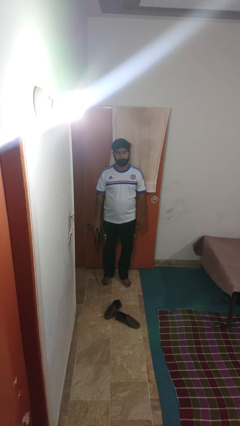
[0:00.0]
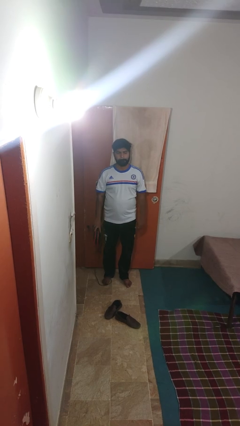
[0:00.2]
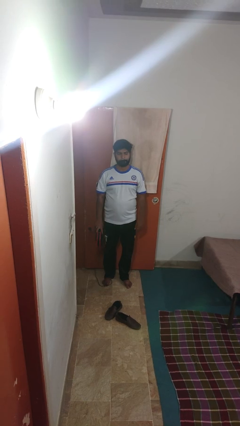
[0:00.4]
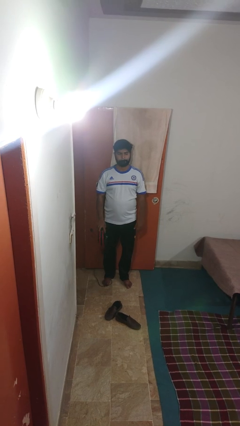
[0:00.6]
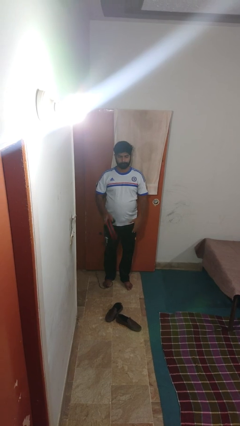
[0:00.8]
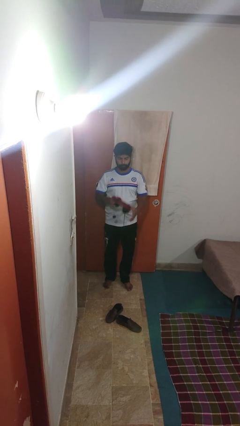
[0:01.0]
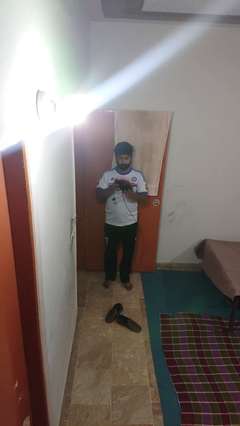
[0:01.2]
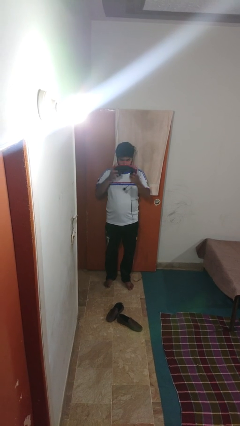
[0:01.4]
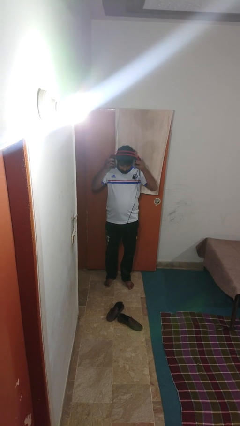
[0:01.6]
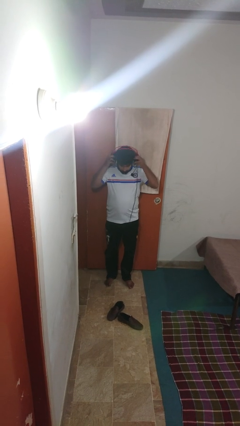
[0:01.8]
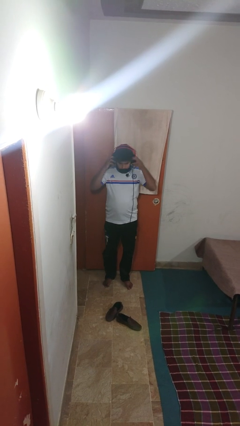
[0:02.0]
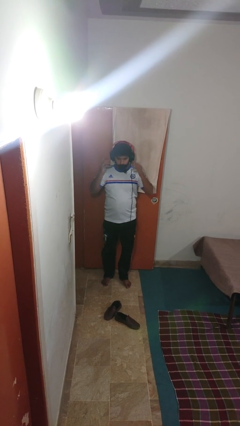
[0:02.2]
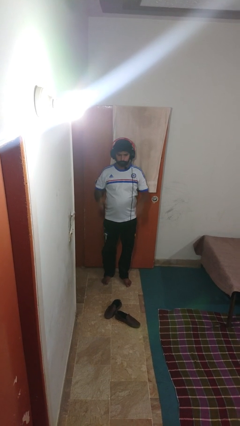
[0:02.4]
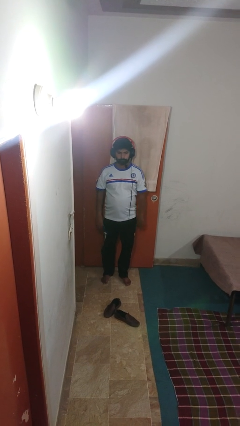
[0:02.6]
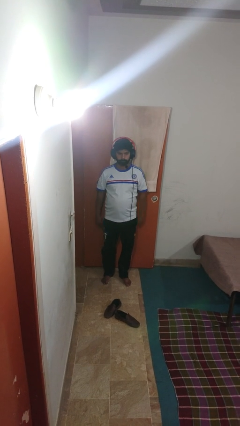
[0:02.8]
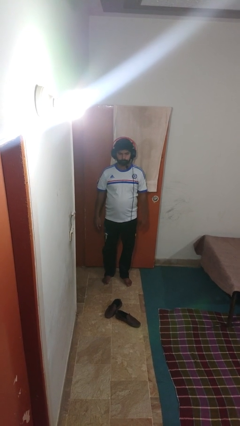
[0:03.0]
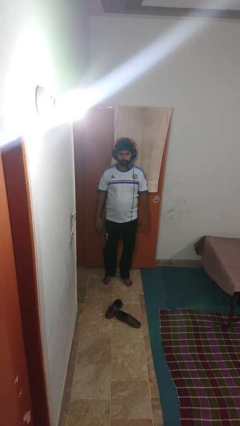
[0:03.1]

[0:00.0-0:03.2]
person puts on headphones

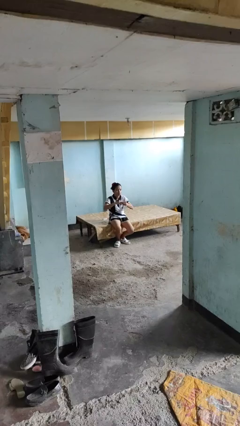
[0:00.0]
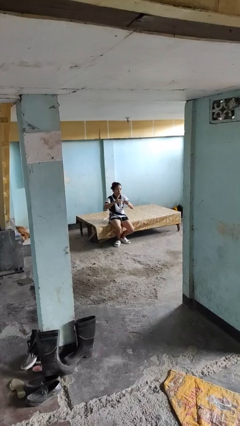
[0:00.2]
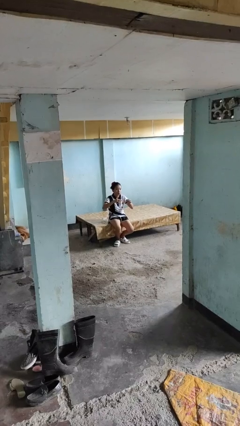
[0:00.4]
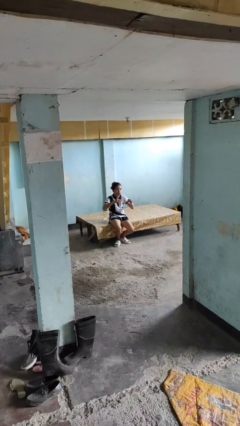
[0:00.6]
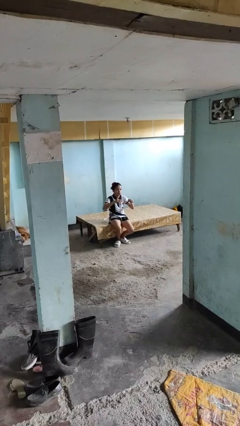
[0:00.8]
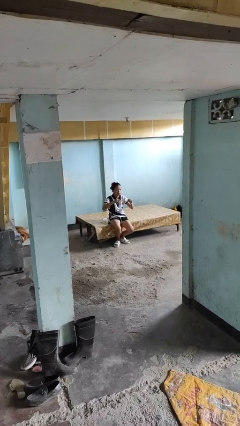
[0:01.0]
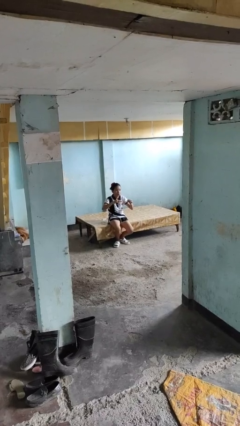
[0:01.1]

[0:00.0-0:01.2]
person takes off ring

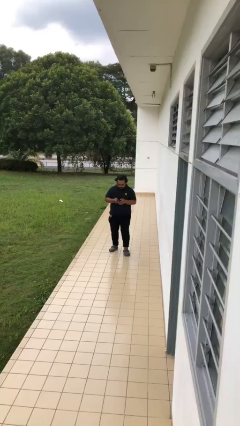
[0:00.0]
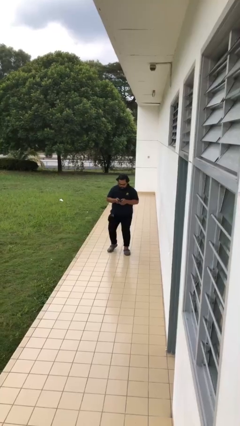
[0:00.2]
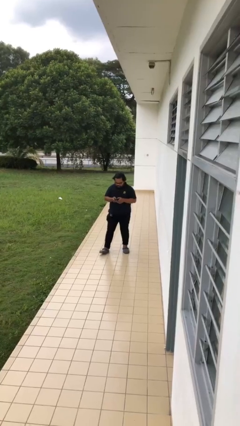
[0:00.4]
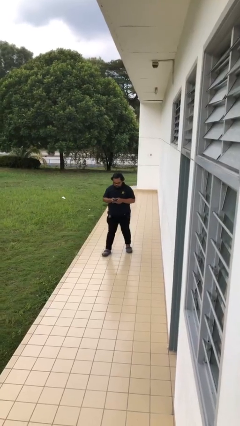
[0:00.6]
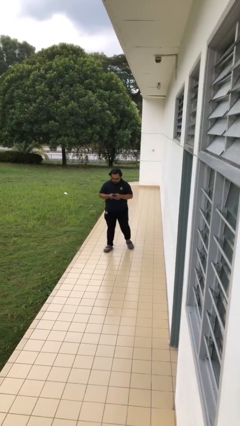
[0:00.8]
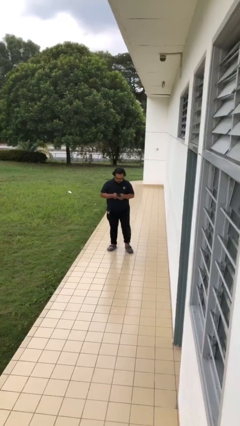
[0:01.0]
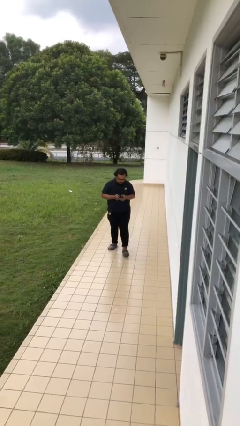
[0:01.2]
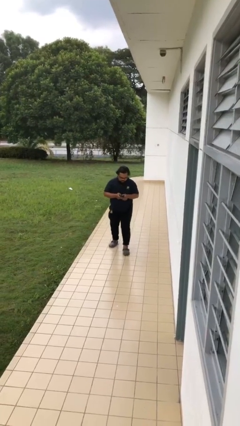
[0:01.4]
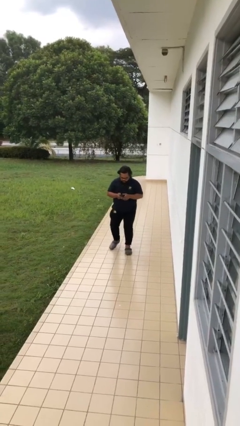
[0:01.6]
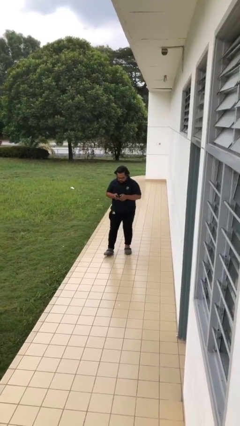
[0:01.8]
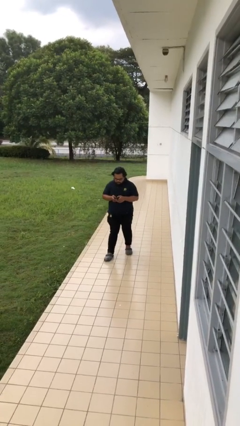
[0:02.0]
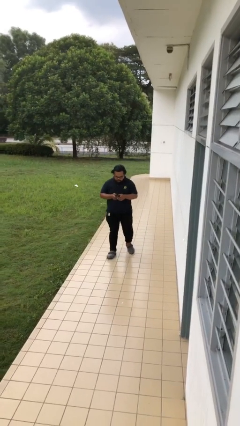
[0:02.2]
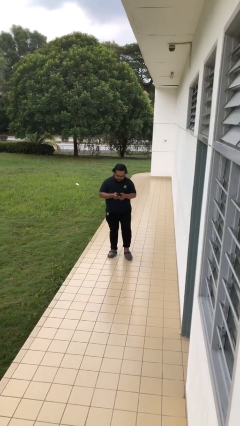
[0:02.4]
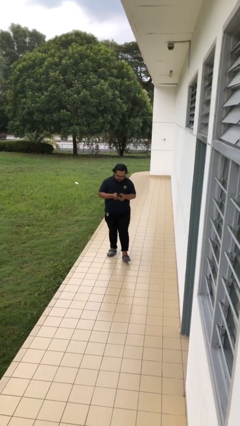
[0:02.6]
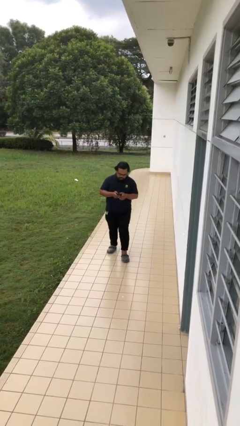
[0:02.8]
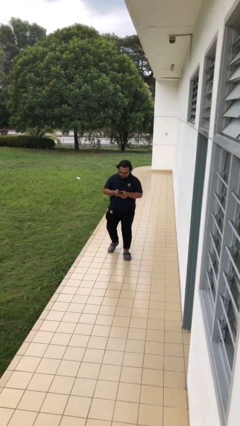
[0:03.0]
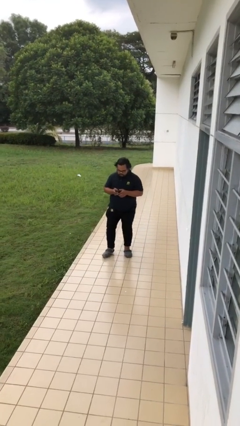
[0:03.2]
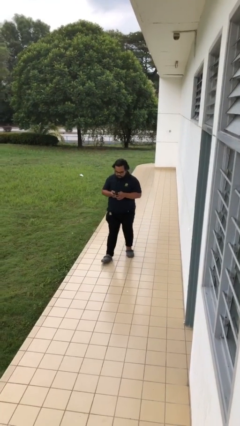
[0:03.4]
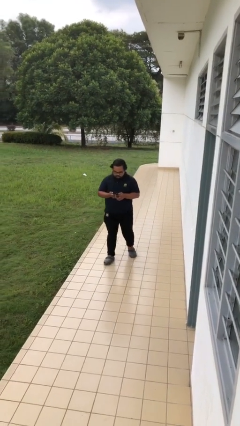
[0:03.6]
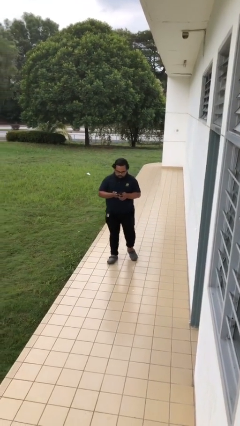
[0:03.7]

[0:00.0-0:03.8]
person texts on phone

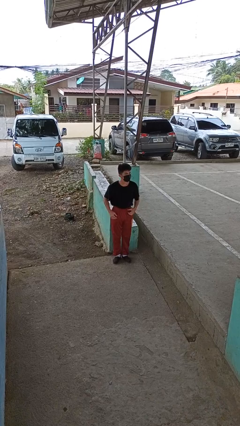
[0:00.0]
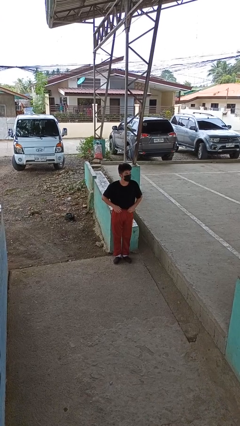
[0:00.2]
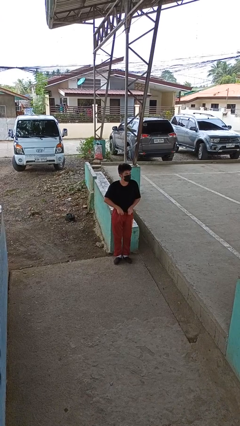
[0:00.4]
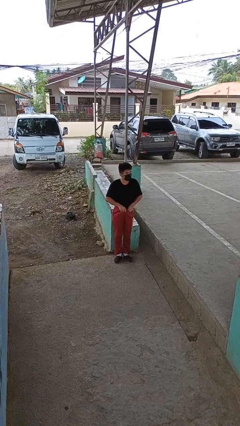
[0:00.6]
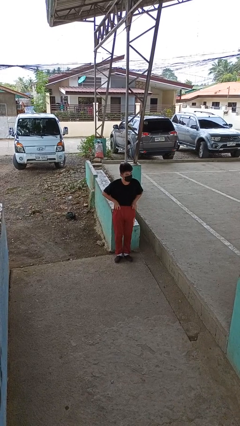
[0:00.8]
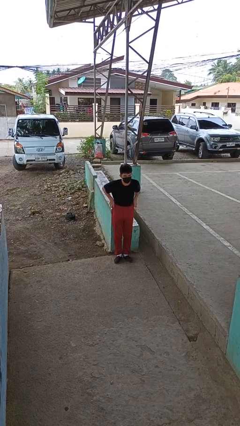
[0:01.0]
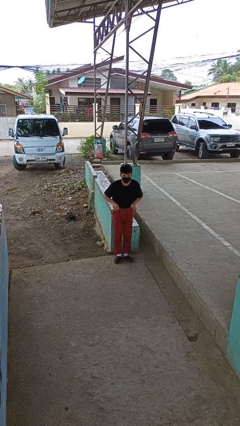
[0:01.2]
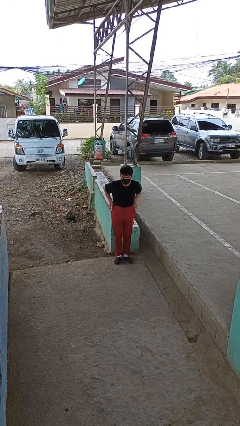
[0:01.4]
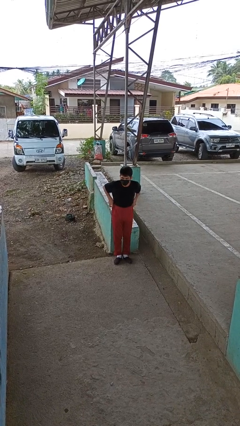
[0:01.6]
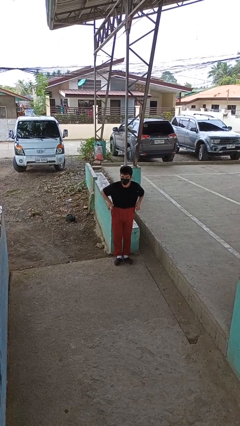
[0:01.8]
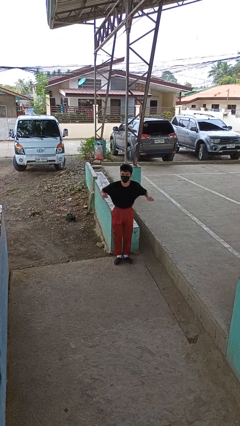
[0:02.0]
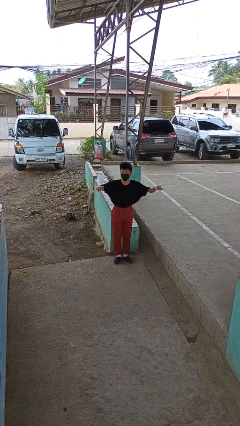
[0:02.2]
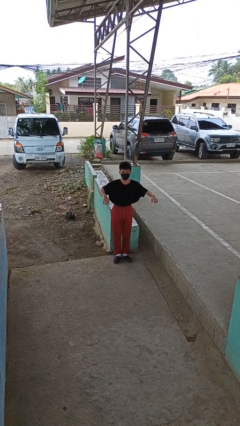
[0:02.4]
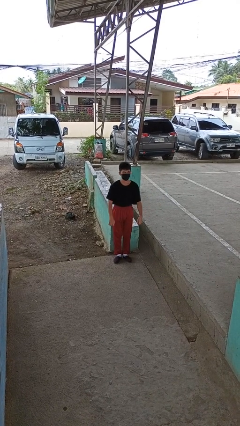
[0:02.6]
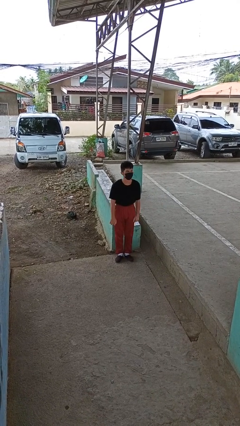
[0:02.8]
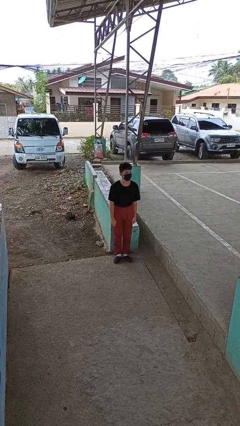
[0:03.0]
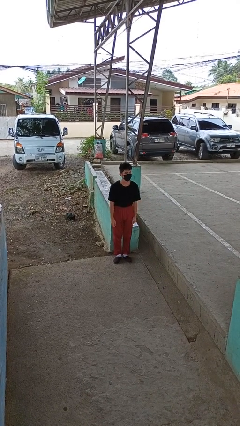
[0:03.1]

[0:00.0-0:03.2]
person hikes up pants

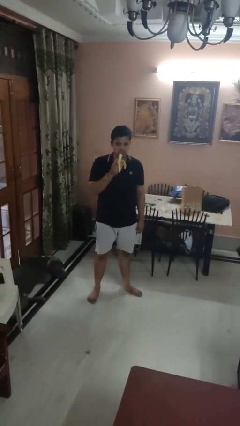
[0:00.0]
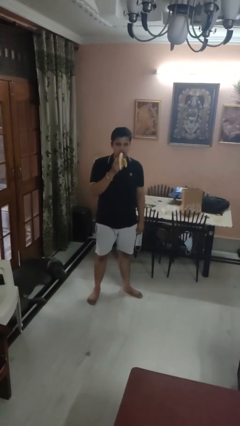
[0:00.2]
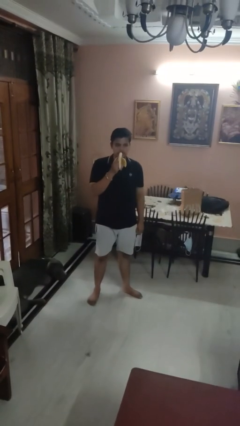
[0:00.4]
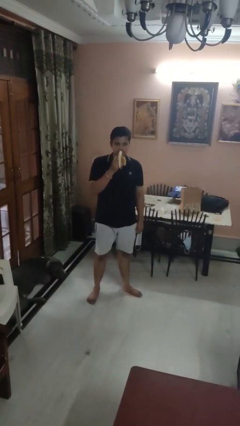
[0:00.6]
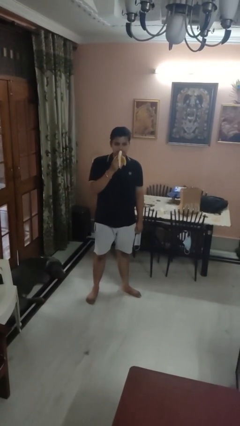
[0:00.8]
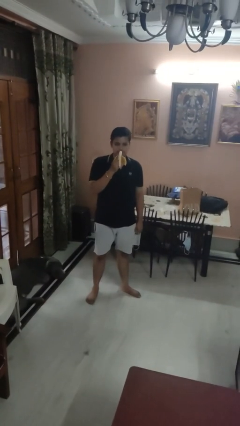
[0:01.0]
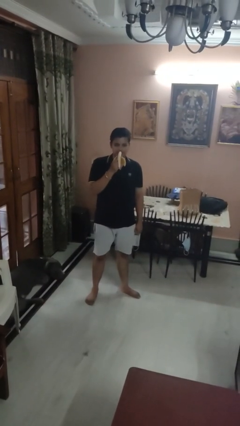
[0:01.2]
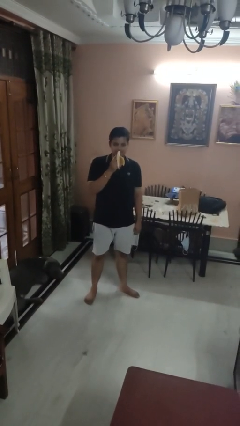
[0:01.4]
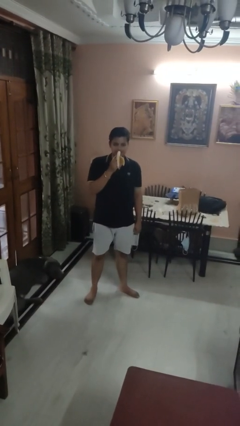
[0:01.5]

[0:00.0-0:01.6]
person eats banana

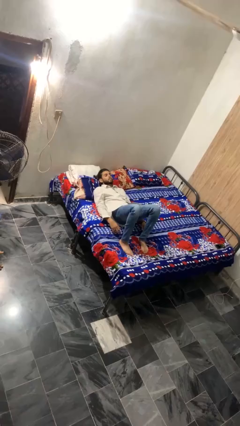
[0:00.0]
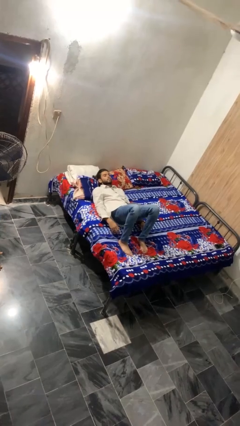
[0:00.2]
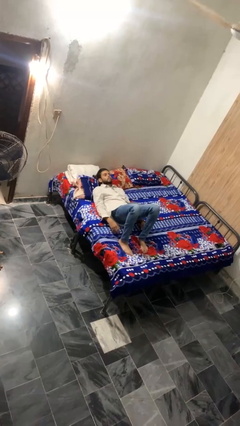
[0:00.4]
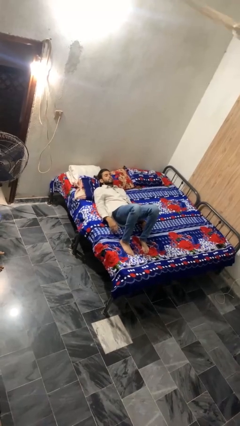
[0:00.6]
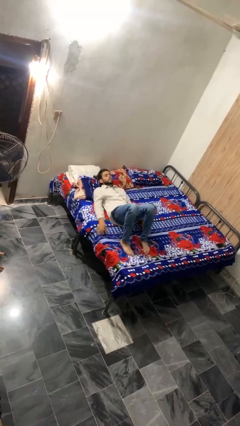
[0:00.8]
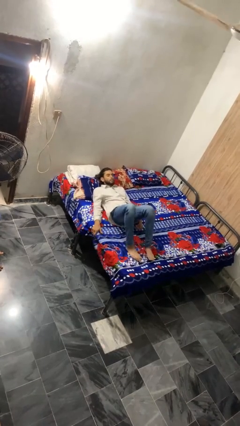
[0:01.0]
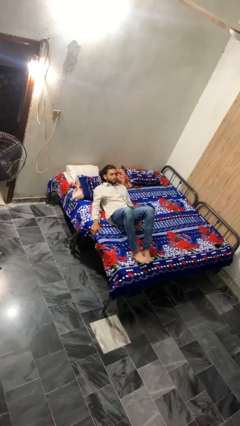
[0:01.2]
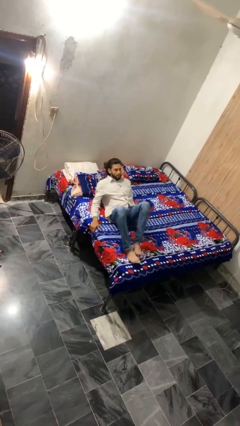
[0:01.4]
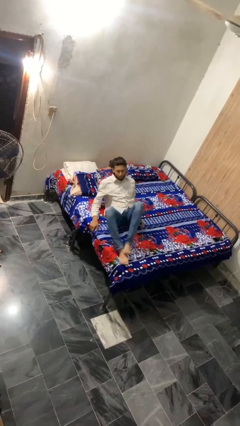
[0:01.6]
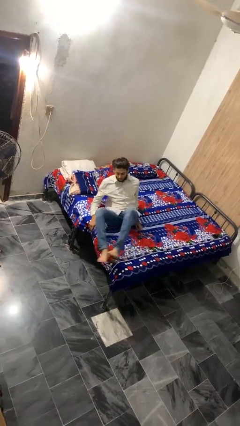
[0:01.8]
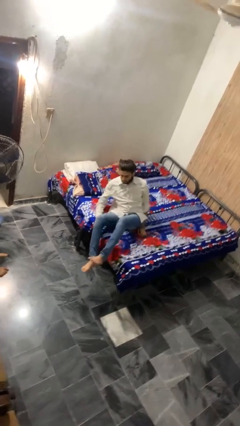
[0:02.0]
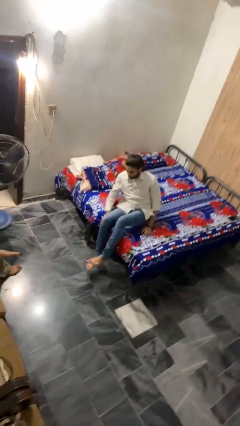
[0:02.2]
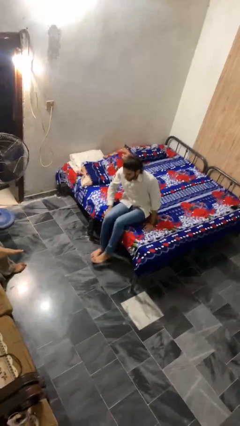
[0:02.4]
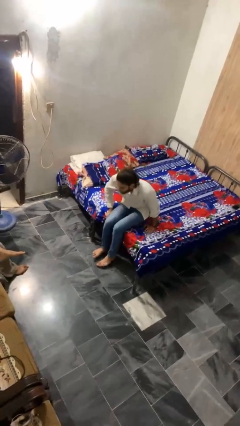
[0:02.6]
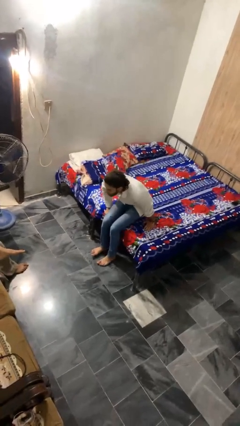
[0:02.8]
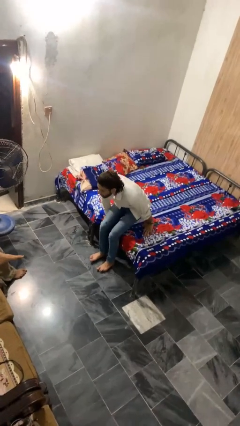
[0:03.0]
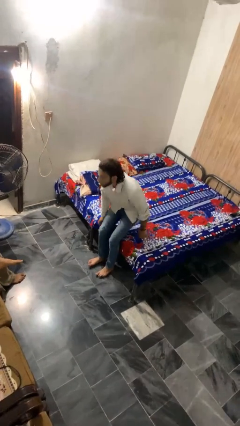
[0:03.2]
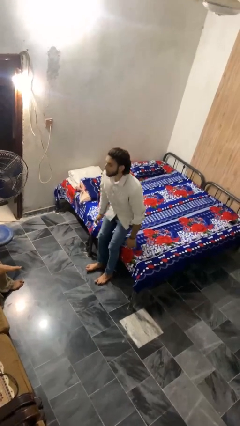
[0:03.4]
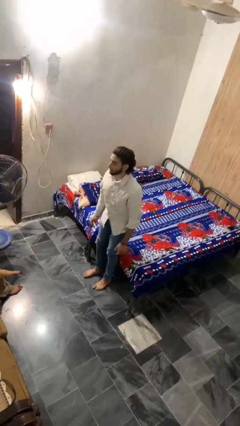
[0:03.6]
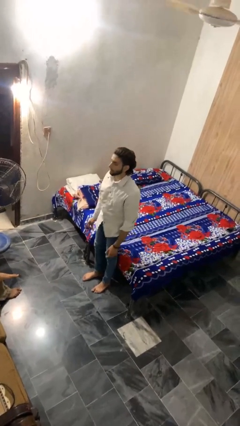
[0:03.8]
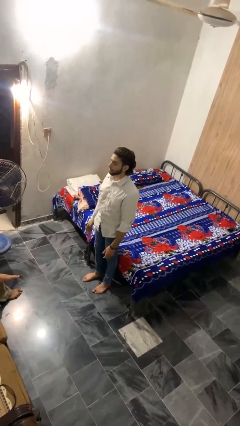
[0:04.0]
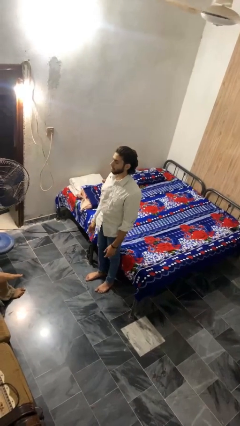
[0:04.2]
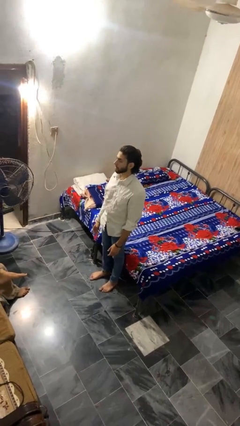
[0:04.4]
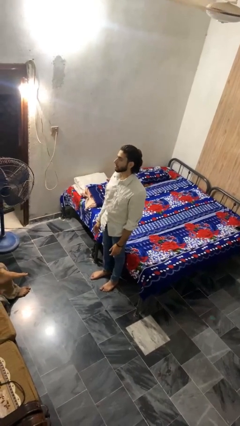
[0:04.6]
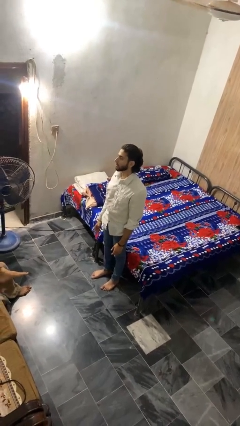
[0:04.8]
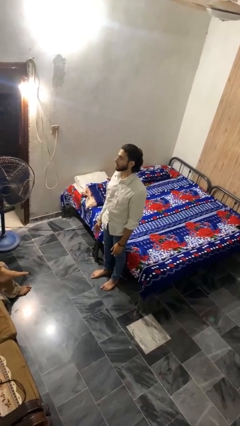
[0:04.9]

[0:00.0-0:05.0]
person stands up
